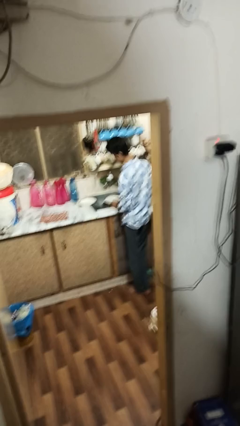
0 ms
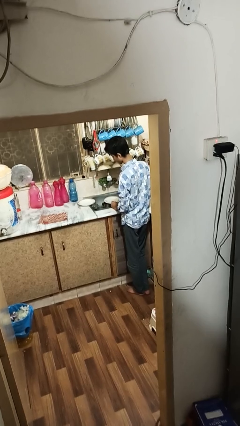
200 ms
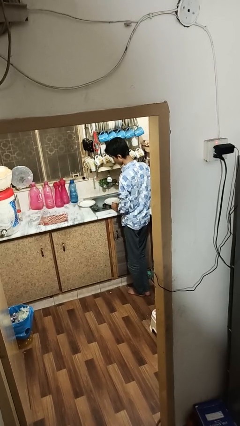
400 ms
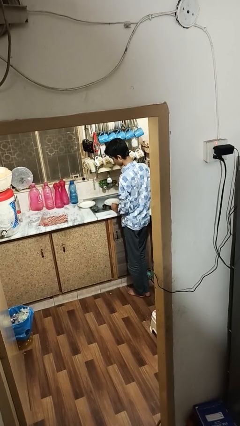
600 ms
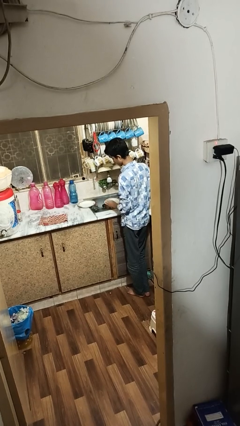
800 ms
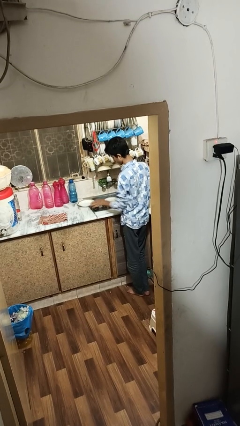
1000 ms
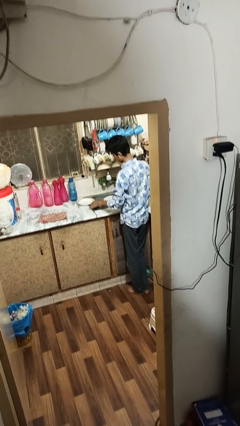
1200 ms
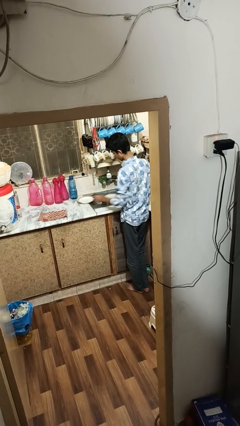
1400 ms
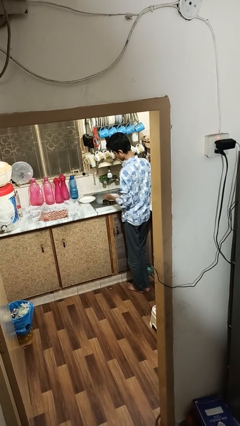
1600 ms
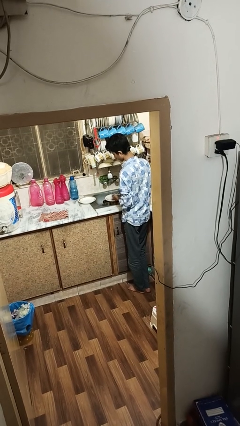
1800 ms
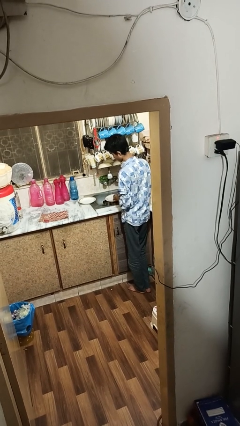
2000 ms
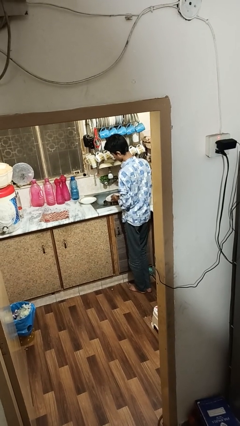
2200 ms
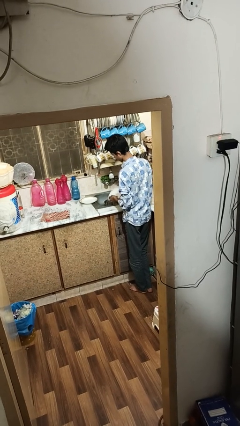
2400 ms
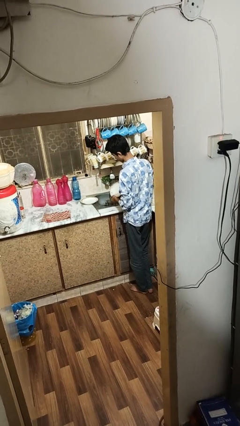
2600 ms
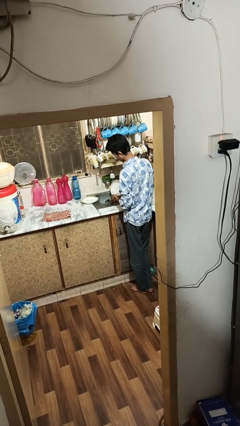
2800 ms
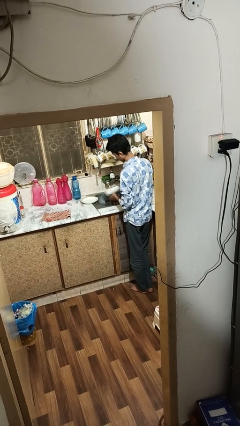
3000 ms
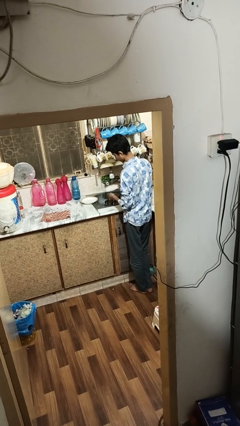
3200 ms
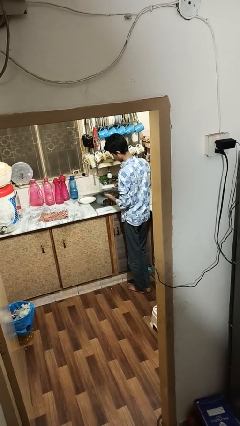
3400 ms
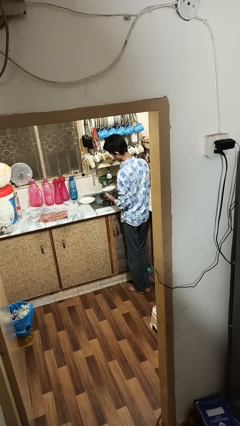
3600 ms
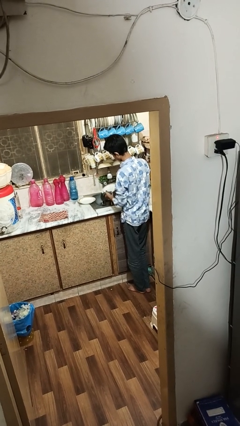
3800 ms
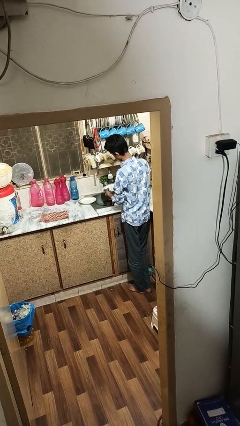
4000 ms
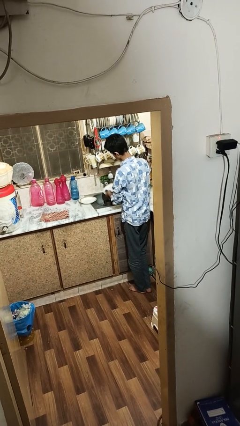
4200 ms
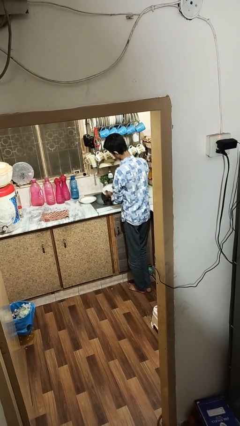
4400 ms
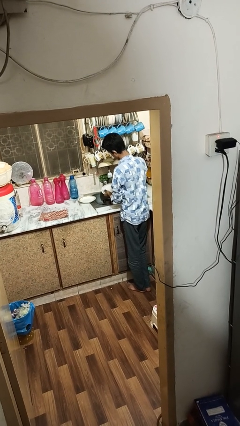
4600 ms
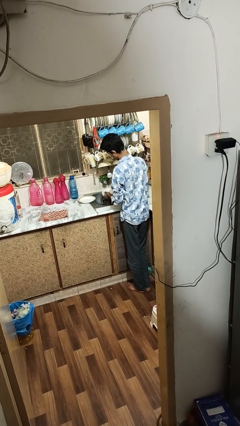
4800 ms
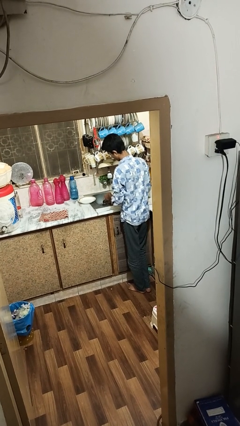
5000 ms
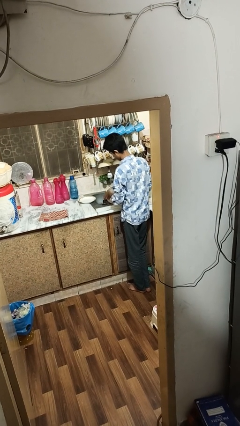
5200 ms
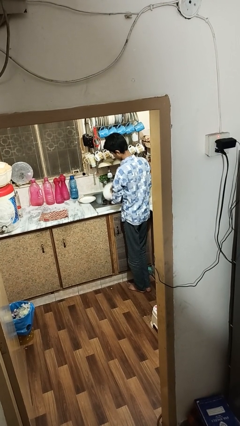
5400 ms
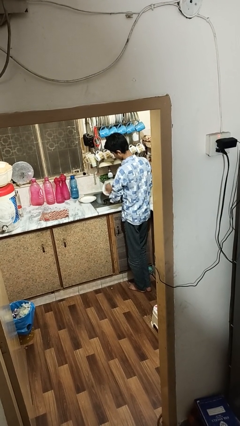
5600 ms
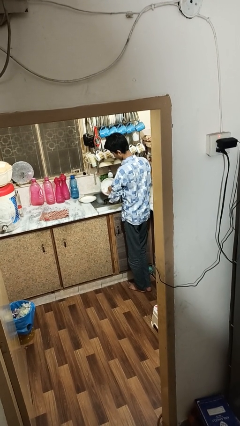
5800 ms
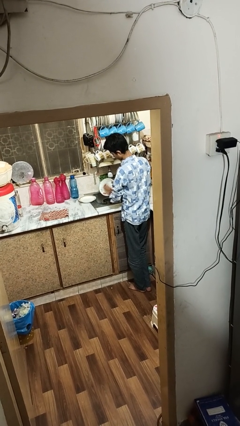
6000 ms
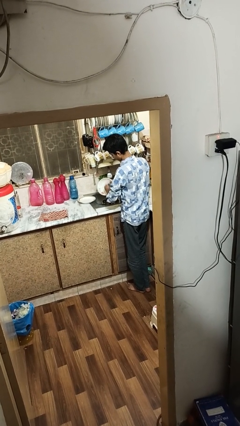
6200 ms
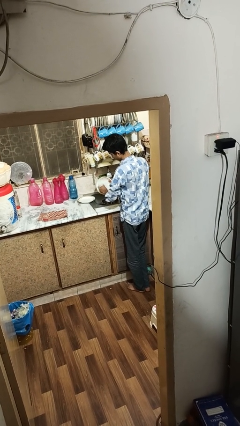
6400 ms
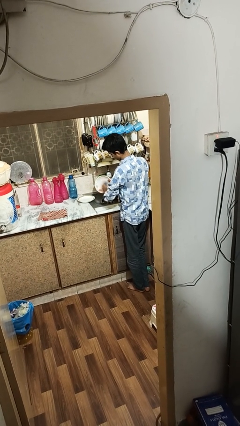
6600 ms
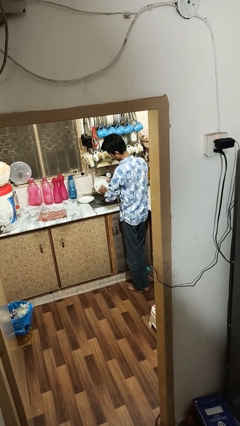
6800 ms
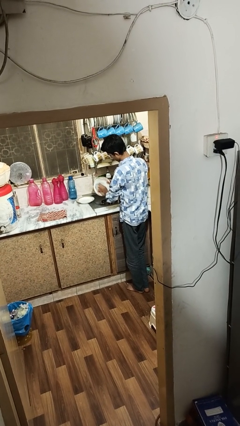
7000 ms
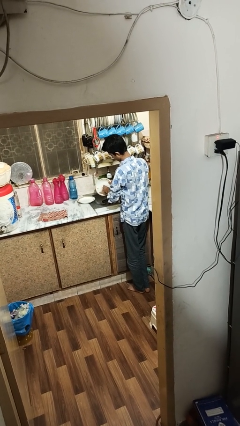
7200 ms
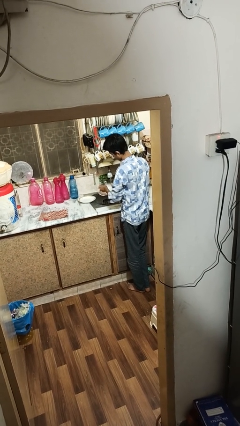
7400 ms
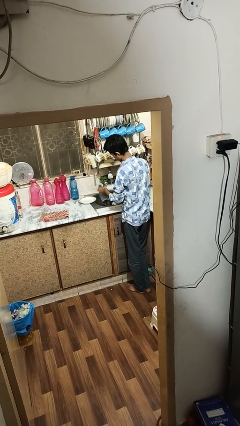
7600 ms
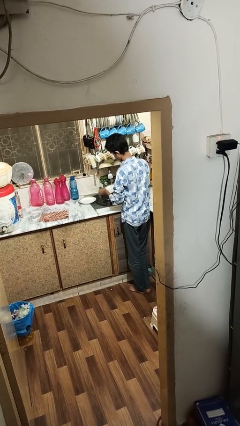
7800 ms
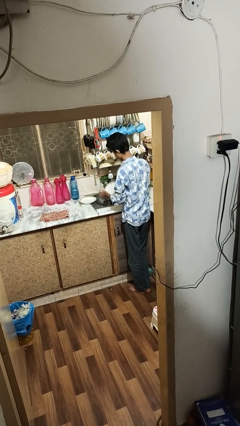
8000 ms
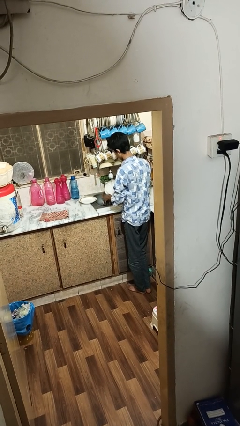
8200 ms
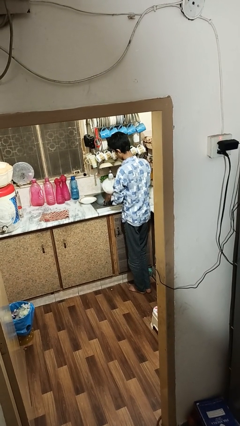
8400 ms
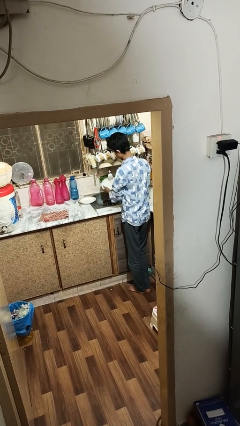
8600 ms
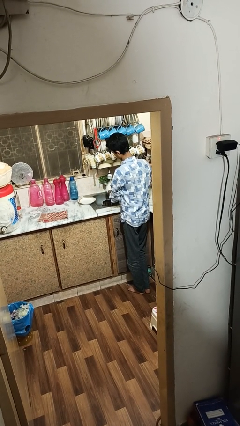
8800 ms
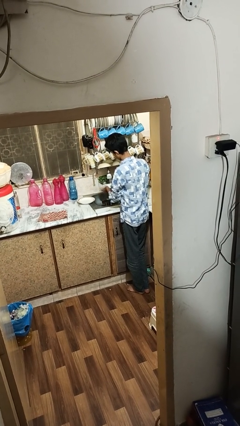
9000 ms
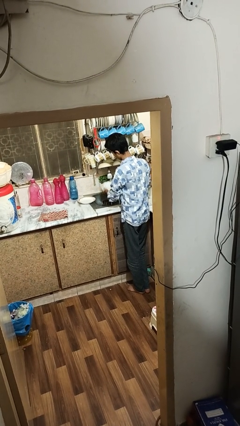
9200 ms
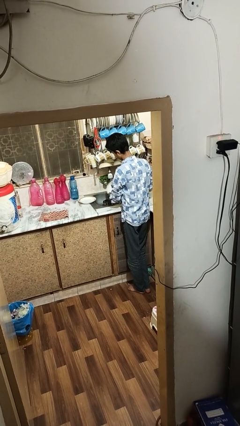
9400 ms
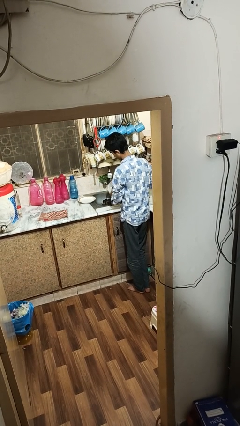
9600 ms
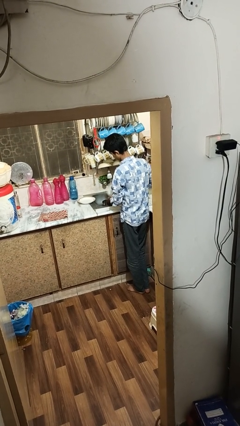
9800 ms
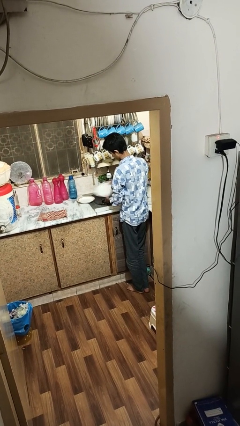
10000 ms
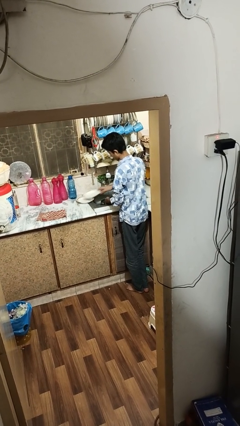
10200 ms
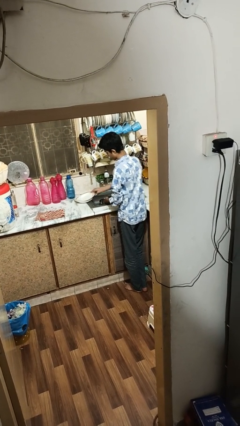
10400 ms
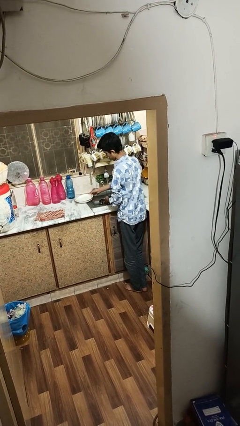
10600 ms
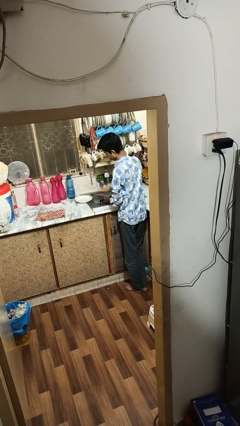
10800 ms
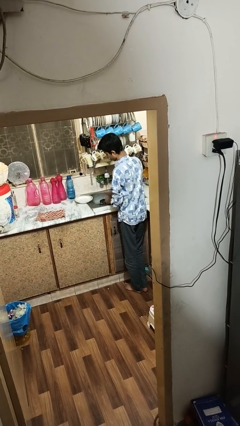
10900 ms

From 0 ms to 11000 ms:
person washes dish

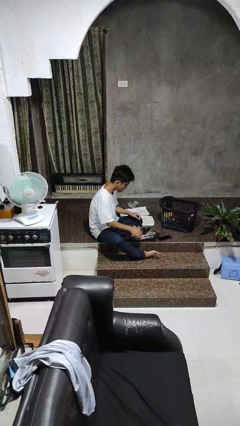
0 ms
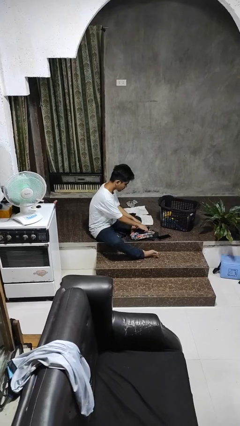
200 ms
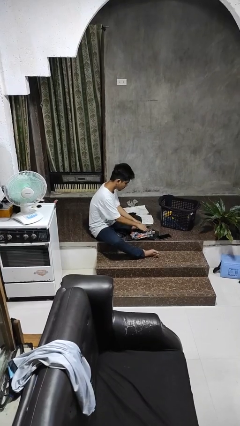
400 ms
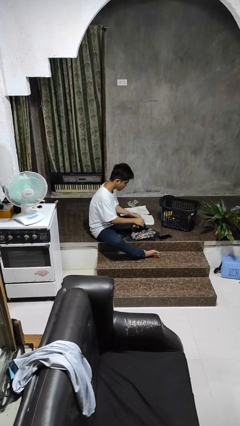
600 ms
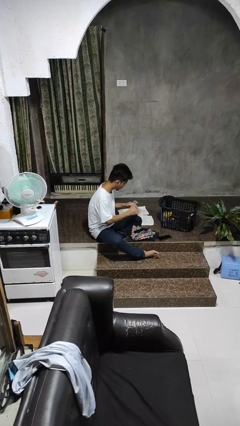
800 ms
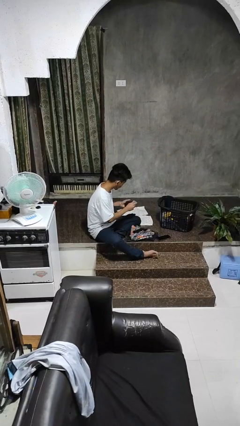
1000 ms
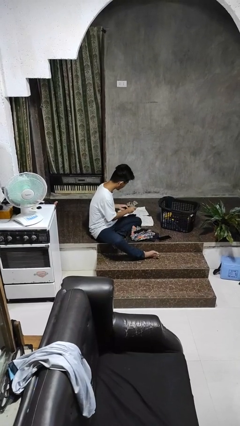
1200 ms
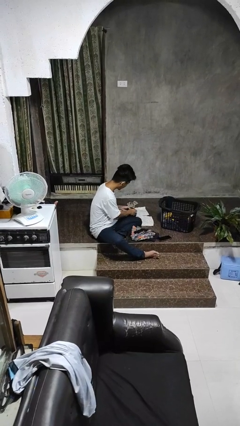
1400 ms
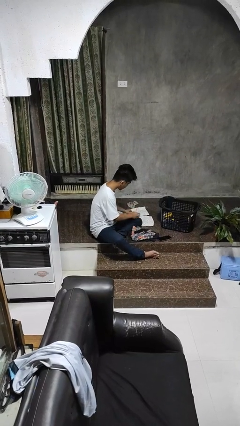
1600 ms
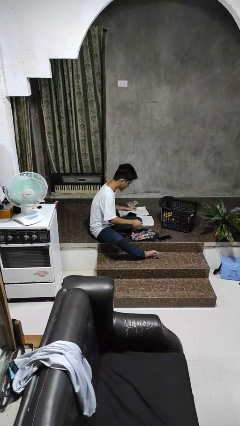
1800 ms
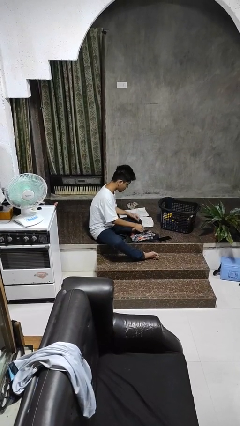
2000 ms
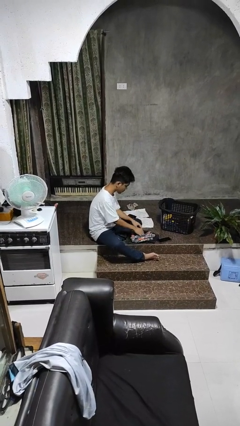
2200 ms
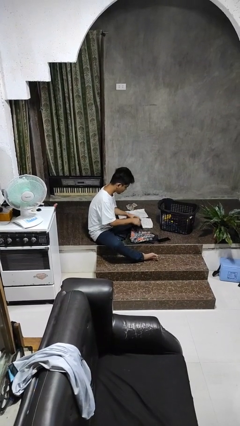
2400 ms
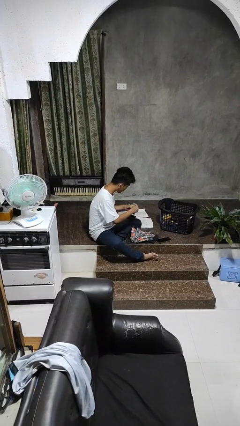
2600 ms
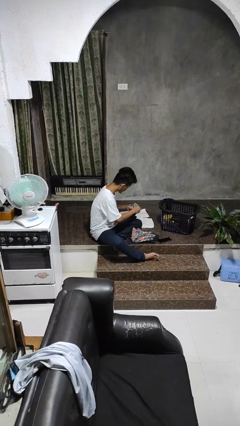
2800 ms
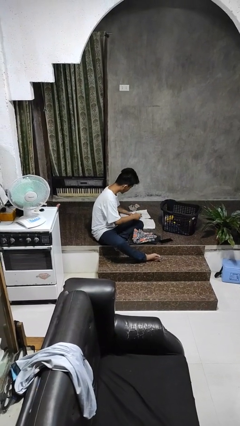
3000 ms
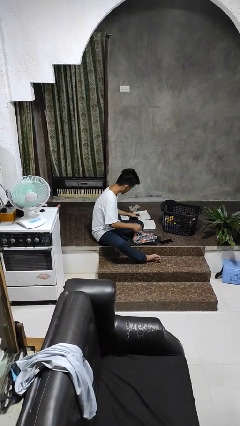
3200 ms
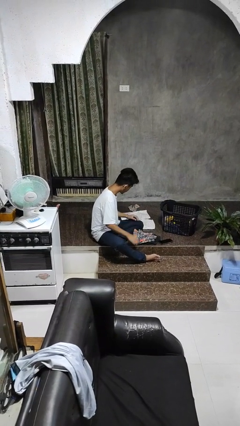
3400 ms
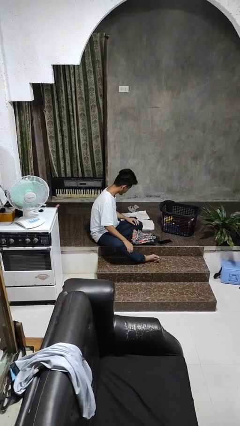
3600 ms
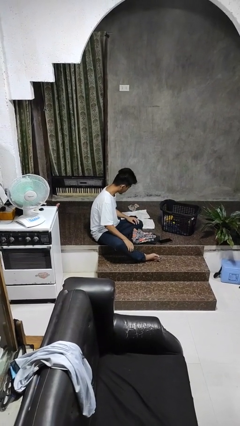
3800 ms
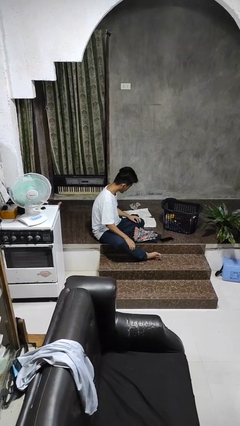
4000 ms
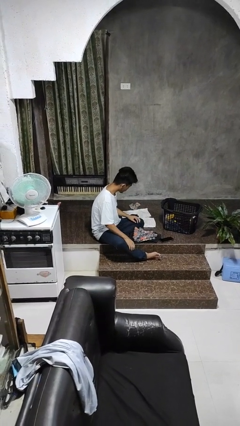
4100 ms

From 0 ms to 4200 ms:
person folds socks

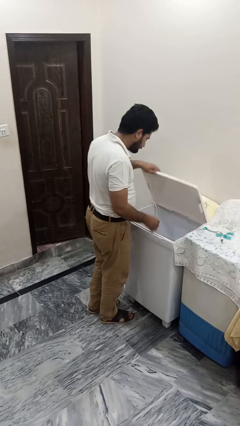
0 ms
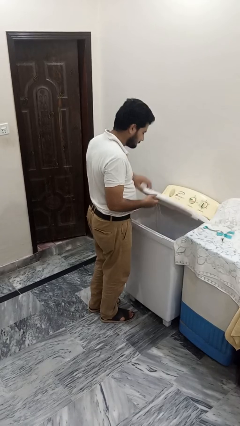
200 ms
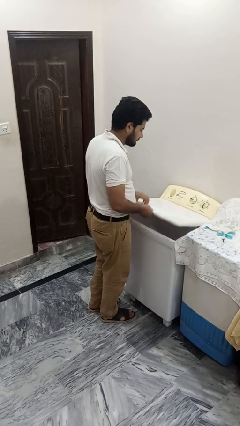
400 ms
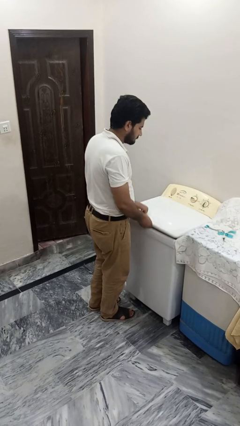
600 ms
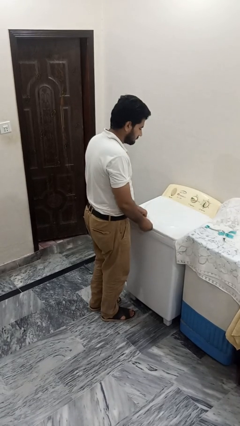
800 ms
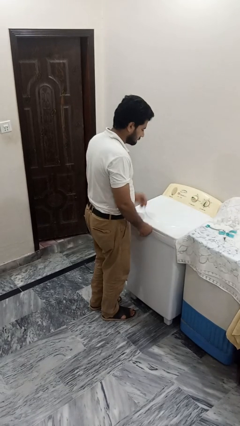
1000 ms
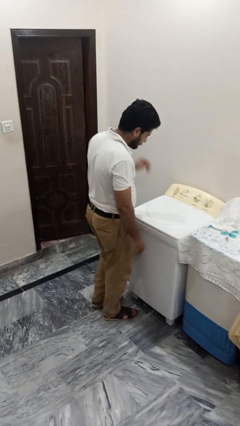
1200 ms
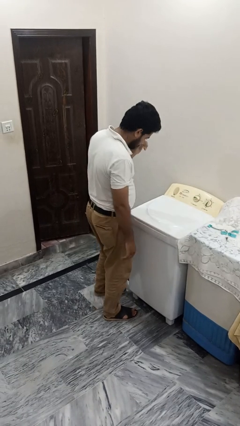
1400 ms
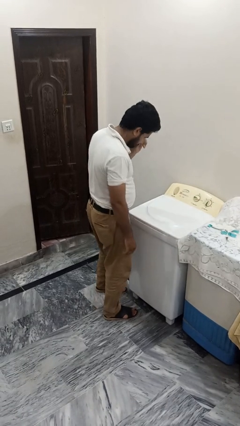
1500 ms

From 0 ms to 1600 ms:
person closes clothes washer

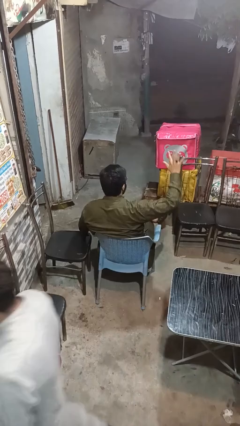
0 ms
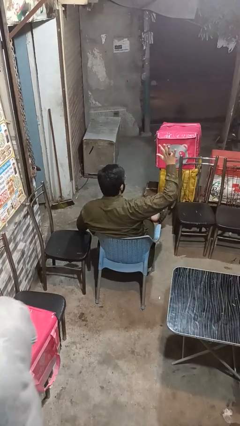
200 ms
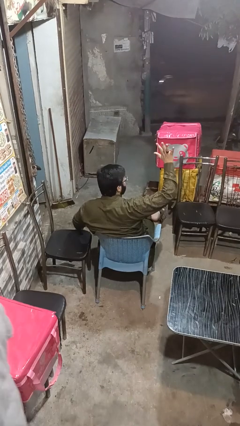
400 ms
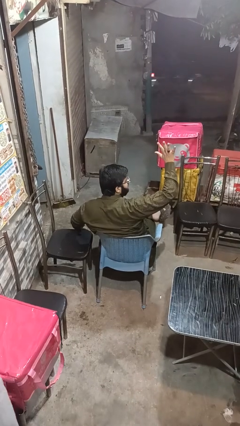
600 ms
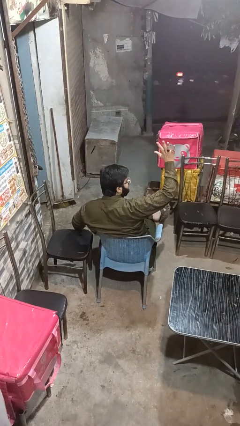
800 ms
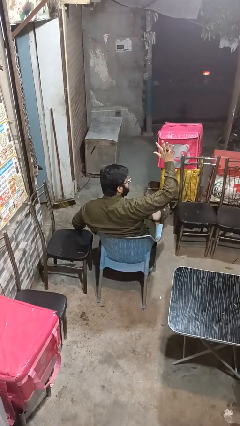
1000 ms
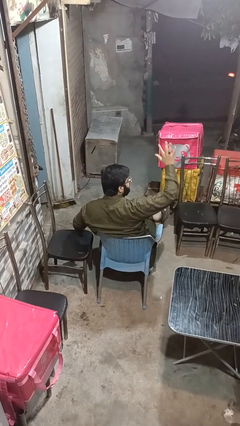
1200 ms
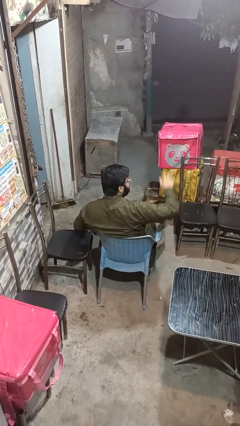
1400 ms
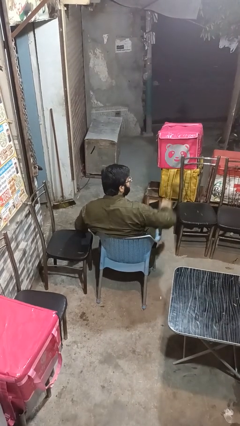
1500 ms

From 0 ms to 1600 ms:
person gestures number five
